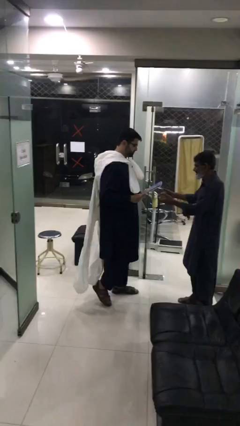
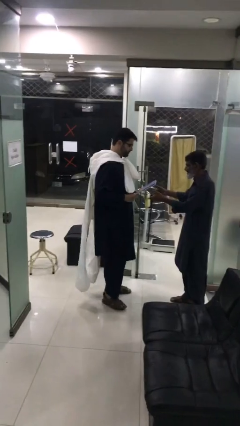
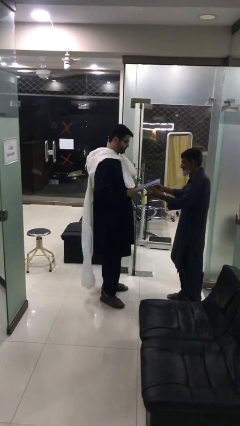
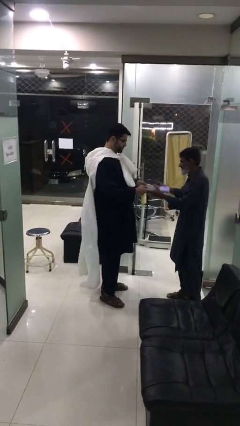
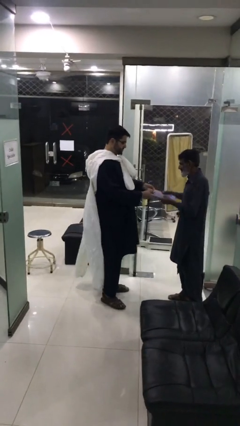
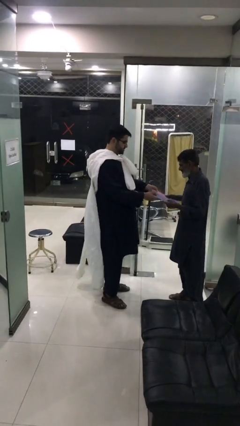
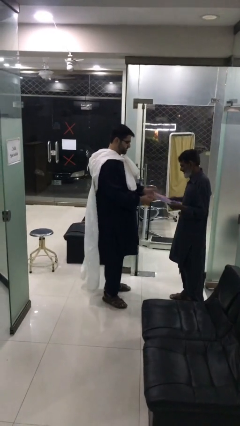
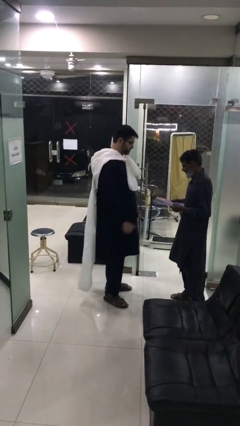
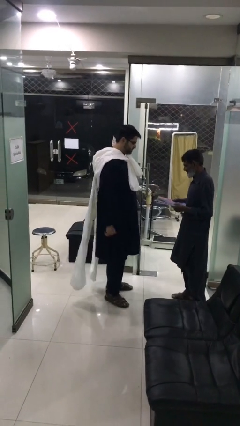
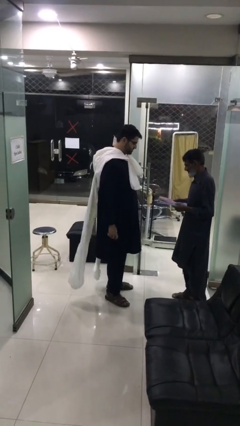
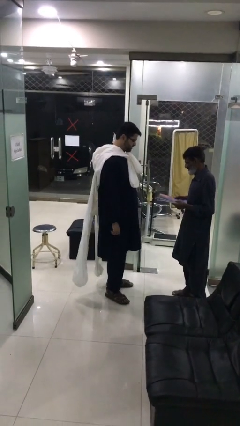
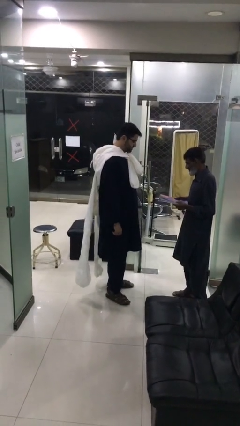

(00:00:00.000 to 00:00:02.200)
person transfers object to person

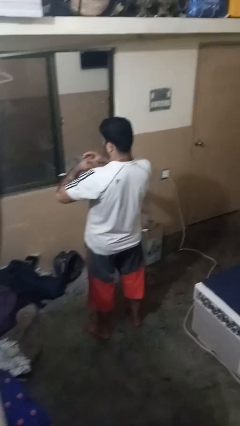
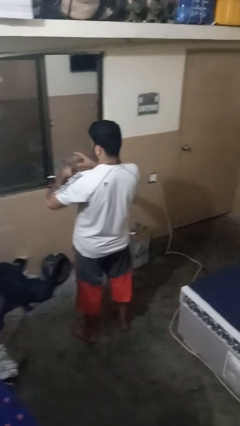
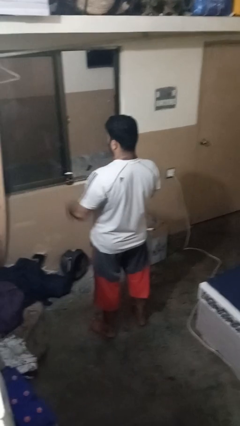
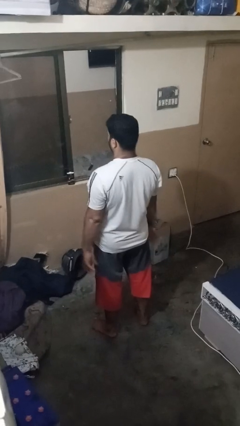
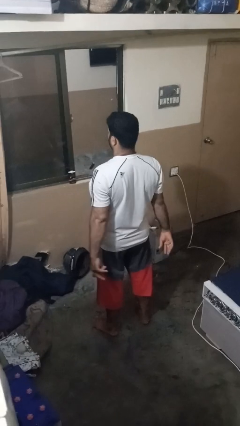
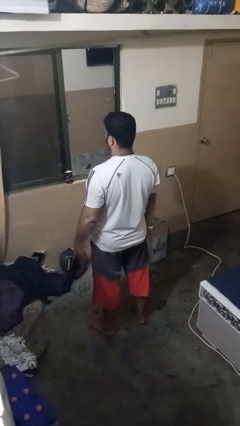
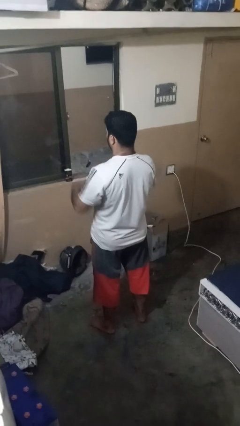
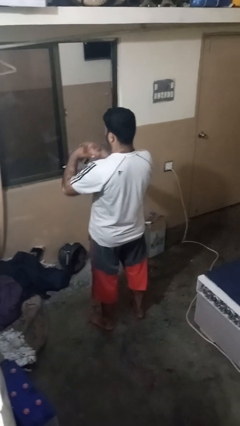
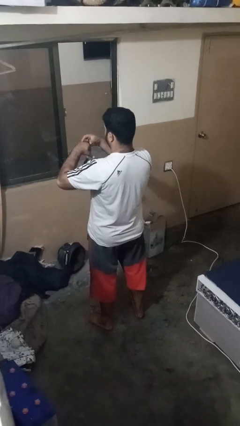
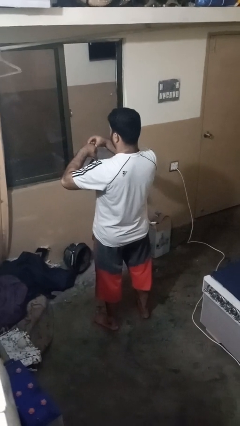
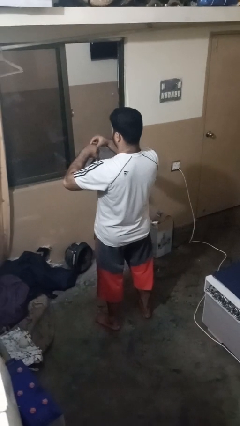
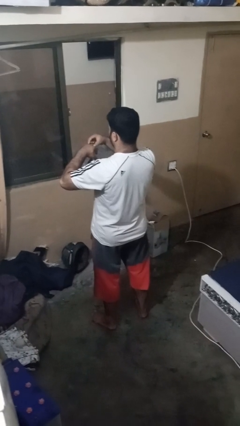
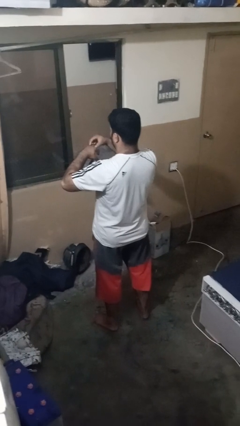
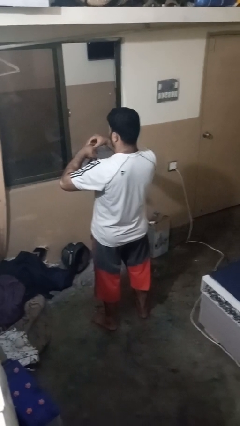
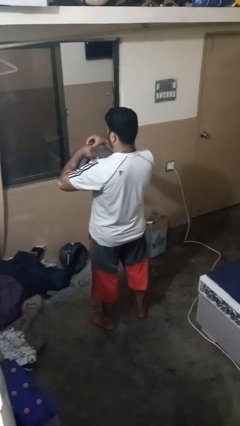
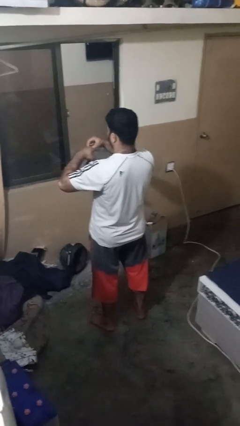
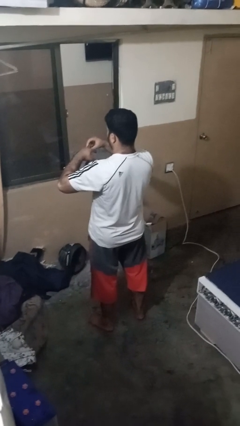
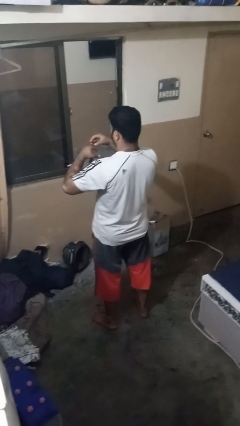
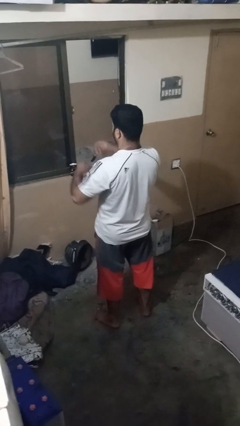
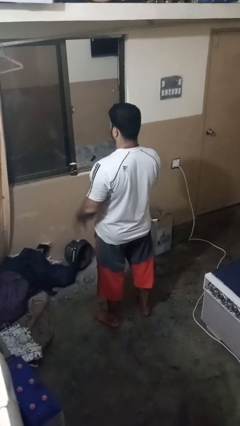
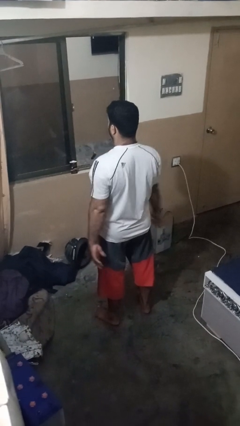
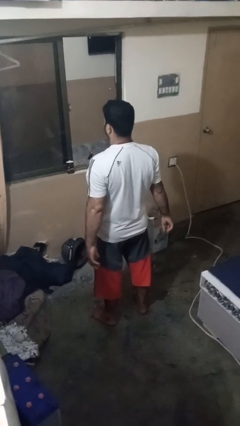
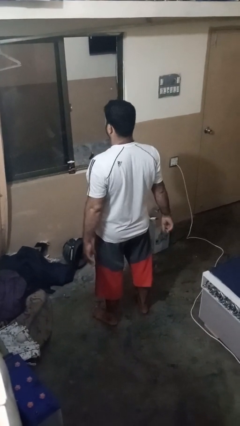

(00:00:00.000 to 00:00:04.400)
person takes off ring

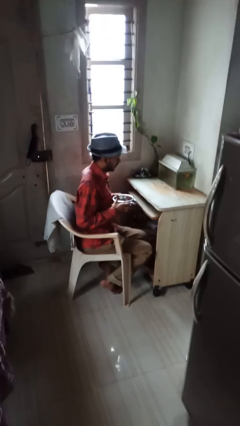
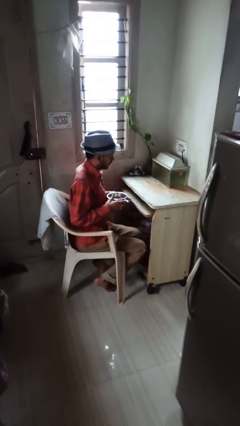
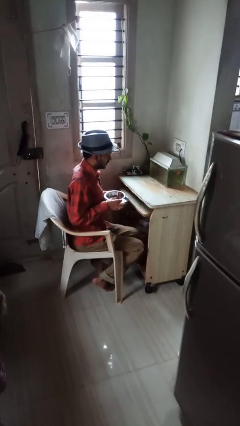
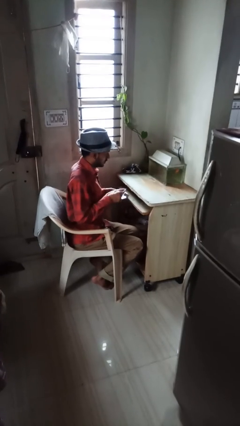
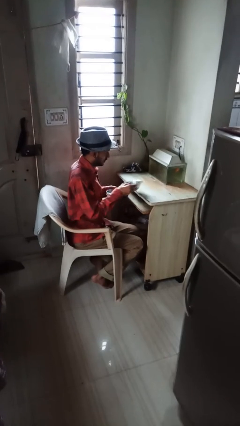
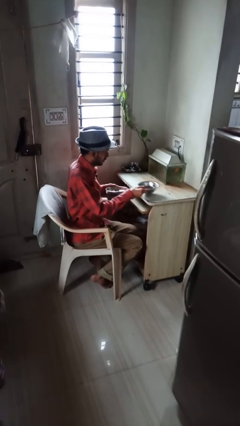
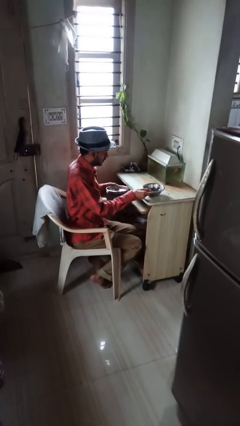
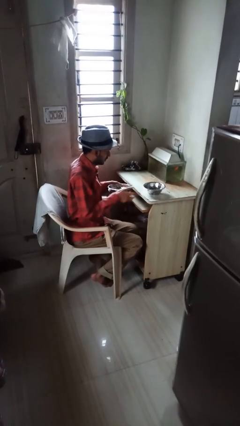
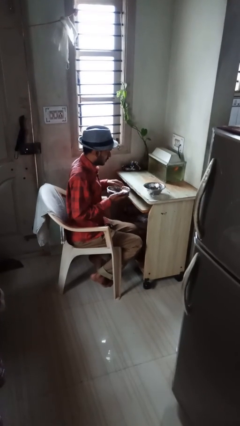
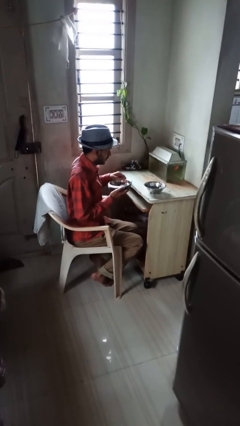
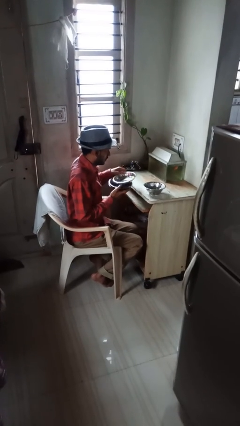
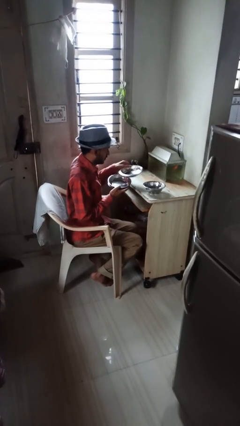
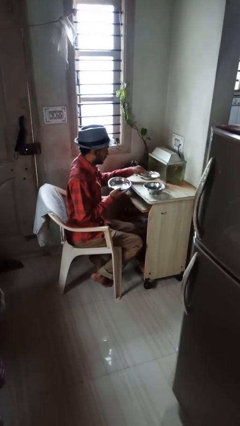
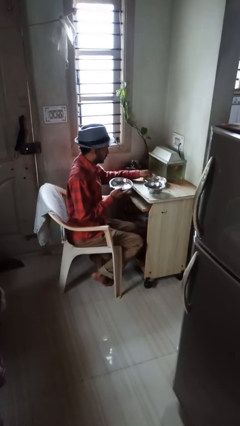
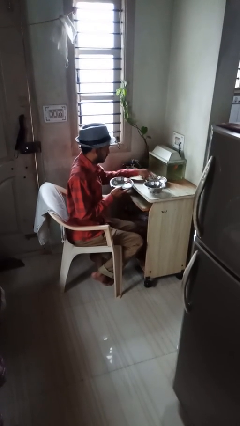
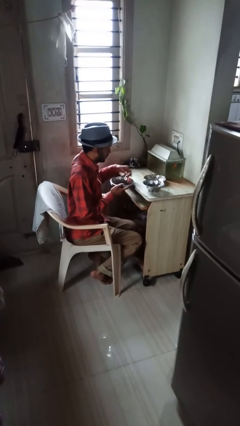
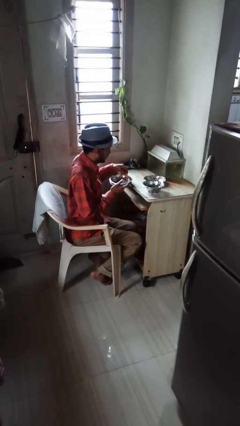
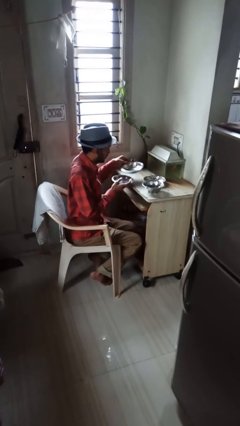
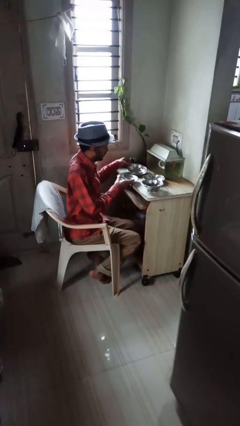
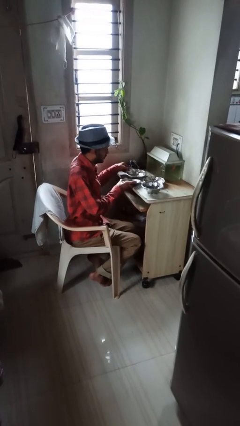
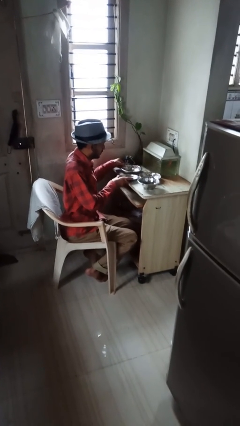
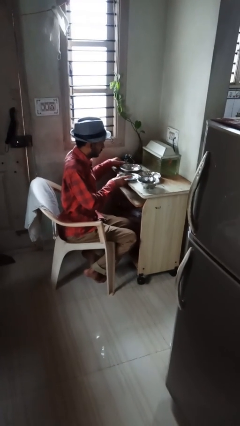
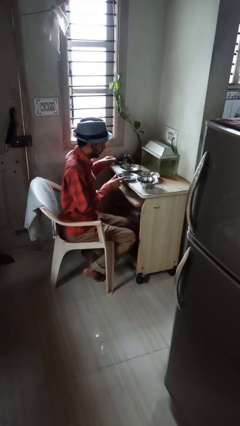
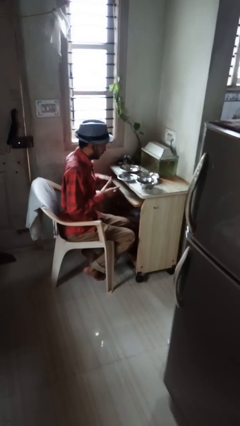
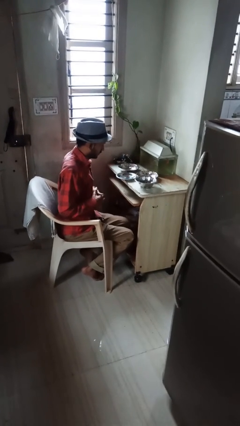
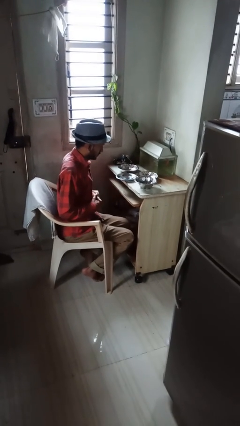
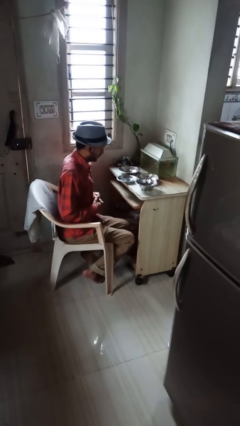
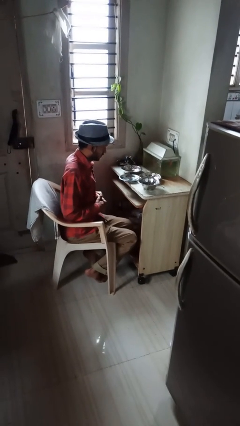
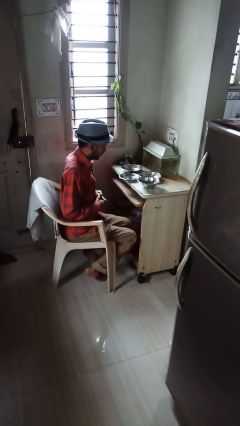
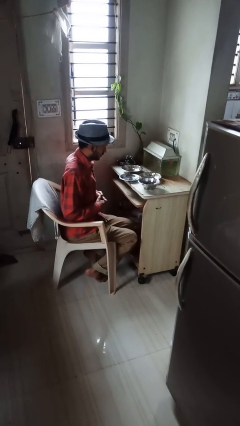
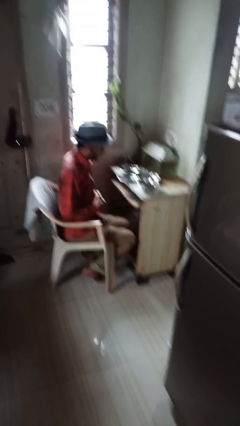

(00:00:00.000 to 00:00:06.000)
person sets table

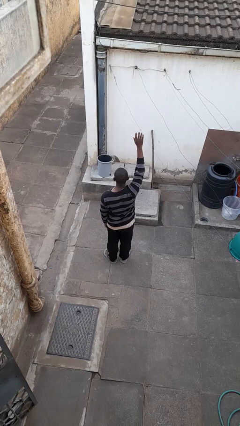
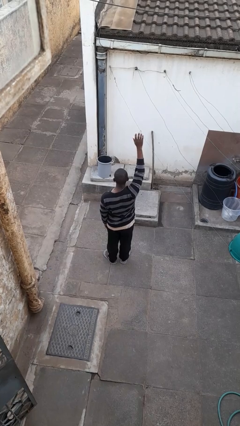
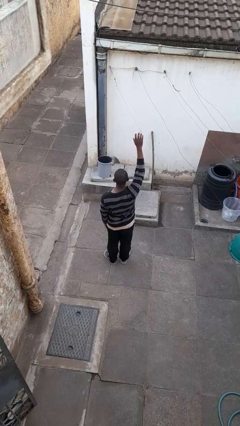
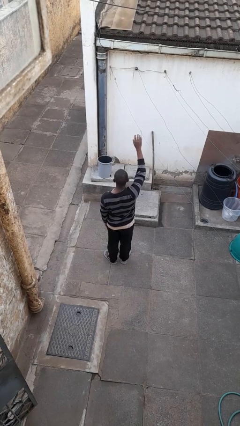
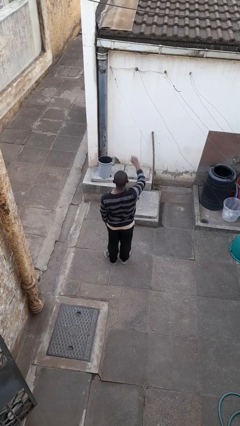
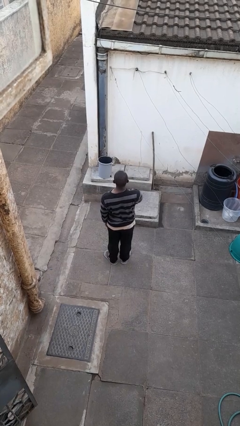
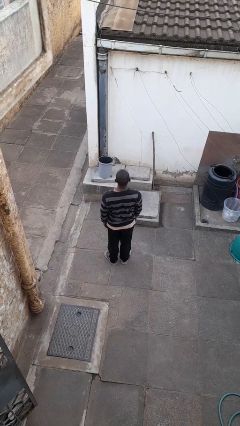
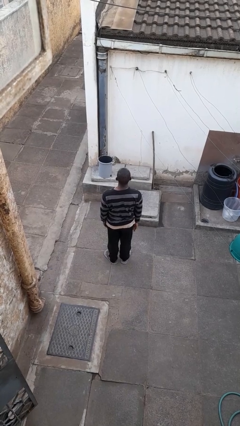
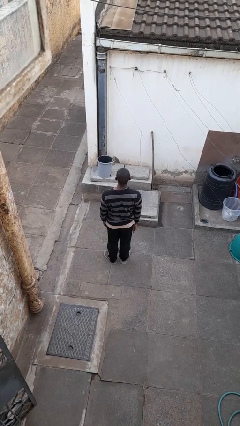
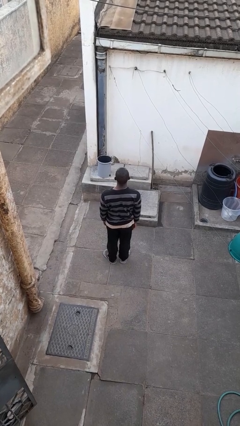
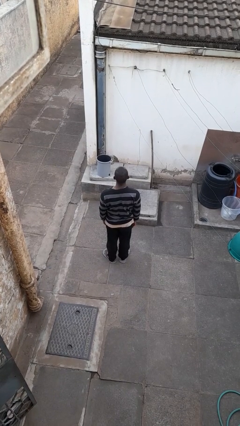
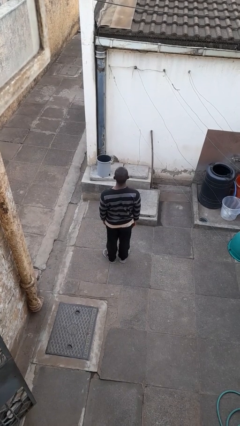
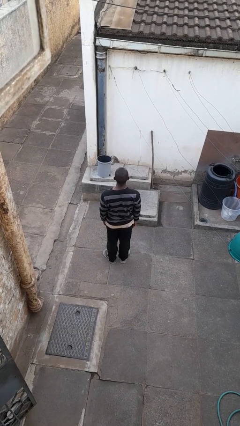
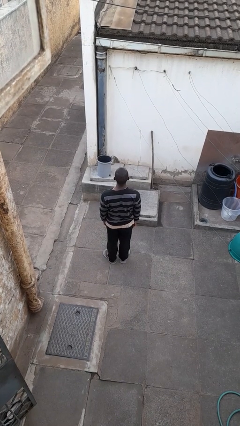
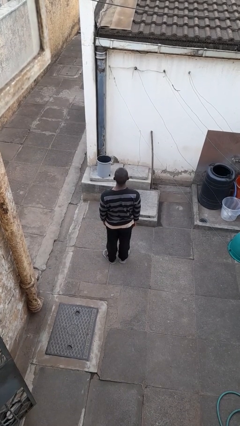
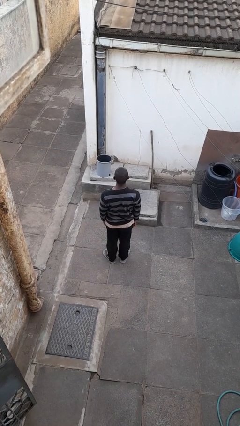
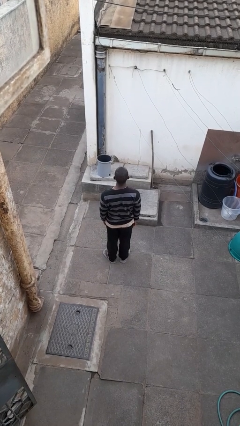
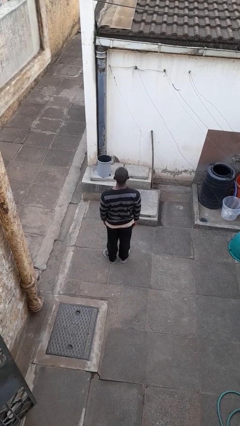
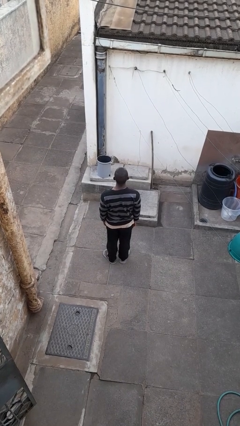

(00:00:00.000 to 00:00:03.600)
person gestures lower hand

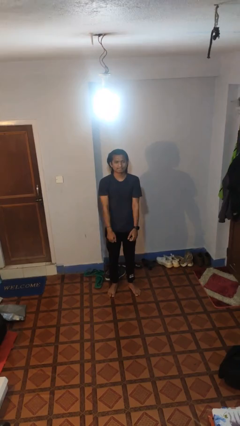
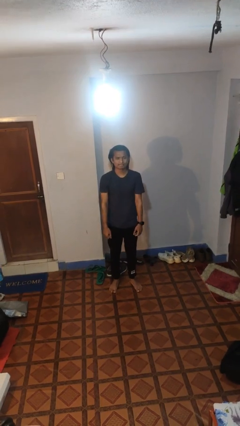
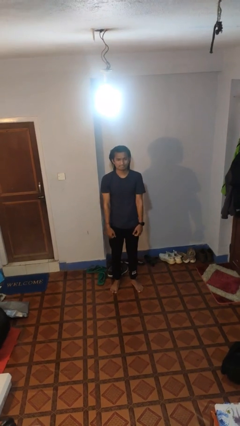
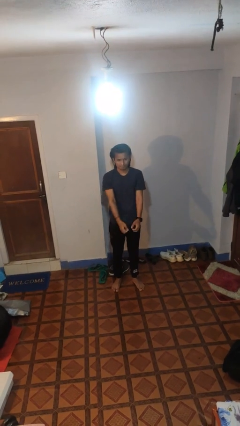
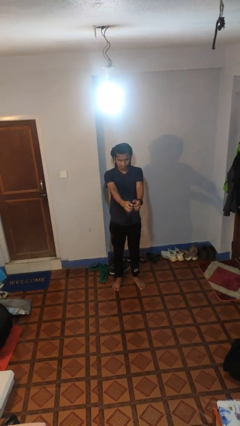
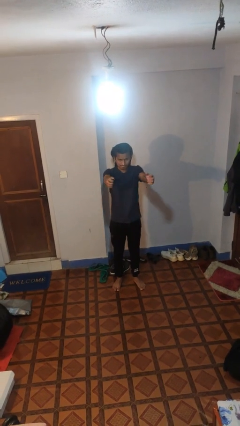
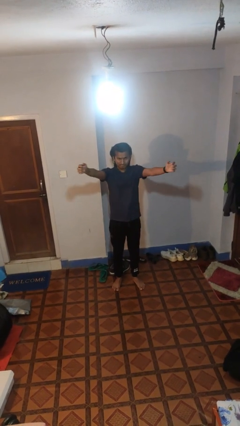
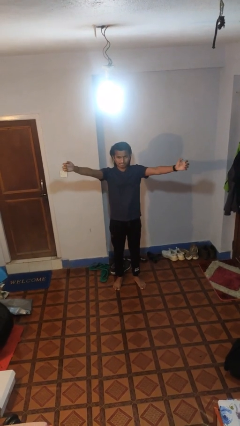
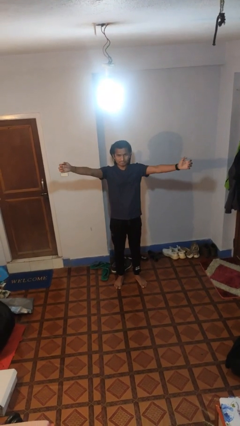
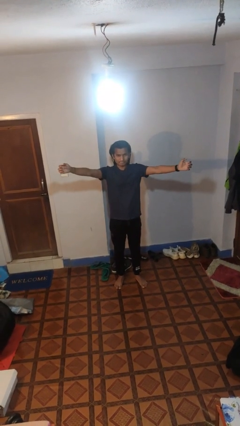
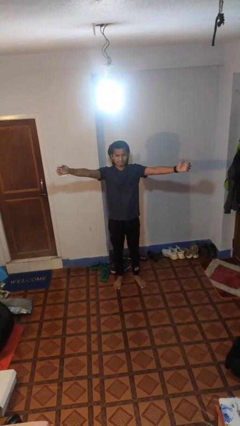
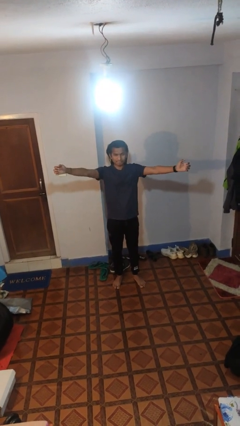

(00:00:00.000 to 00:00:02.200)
person gestures zoom in
